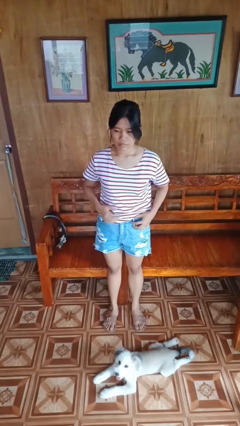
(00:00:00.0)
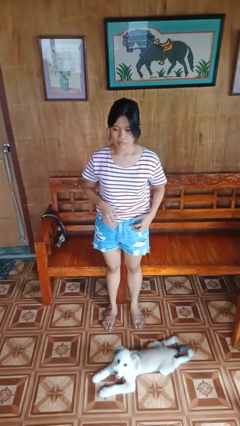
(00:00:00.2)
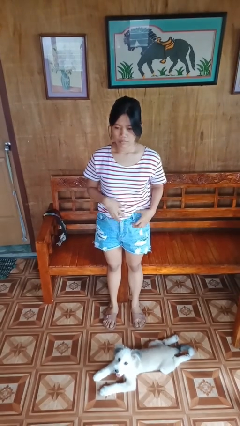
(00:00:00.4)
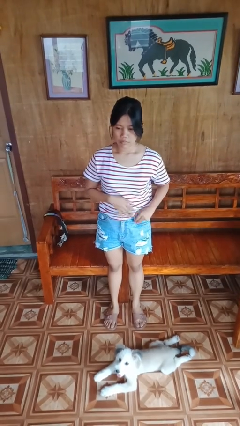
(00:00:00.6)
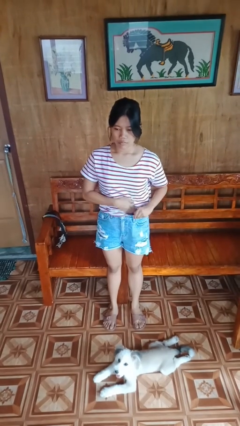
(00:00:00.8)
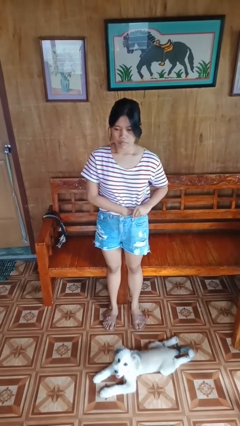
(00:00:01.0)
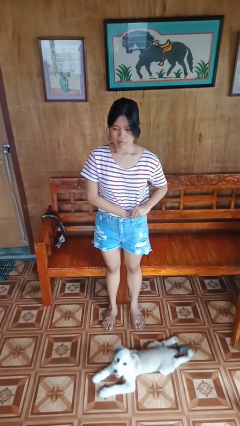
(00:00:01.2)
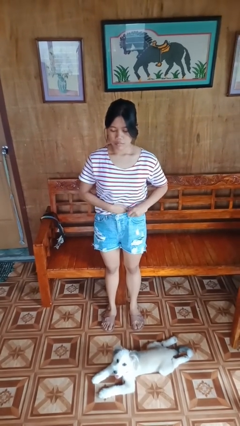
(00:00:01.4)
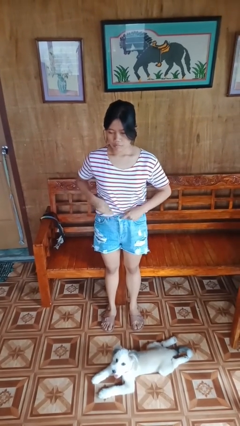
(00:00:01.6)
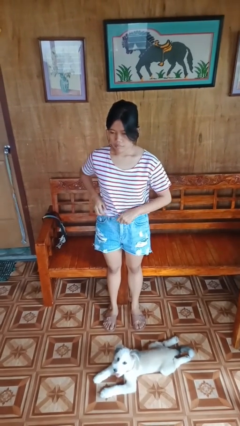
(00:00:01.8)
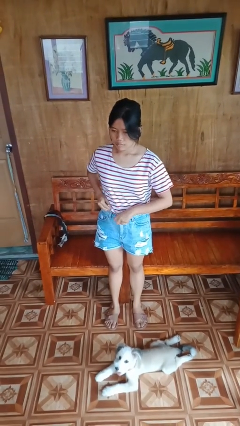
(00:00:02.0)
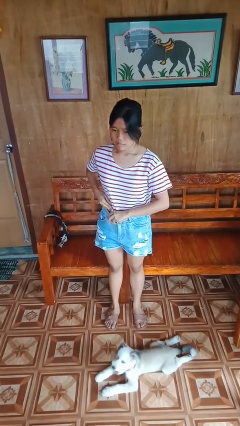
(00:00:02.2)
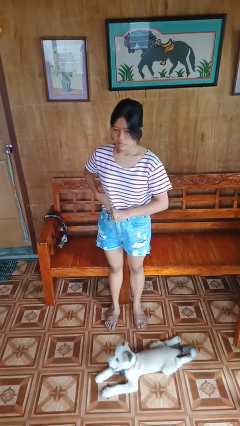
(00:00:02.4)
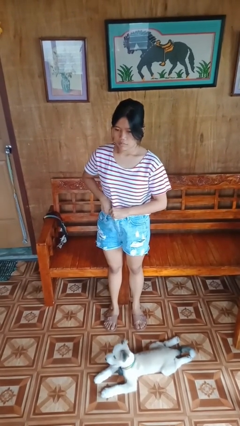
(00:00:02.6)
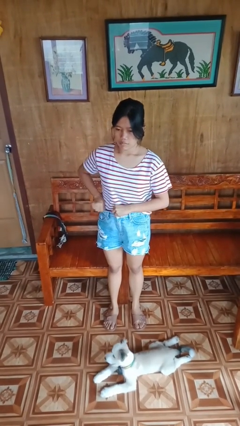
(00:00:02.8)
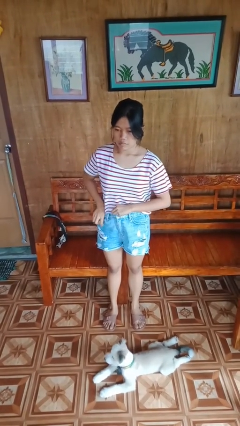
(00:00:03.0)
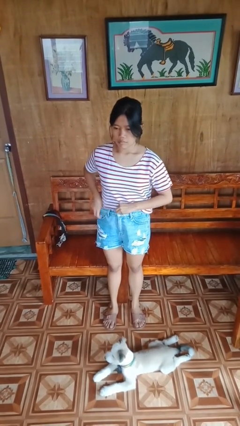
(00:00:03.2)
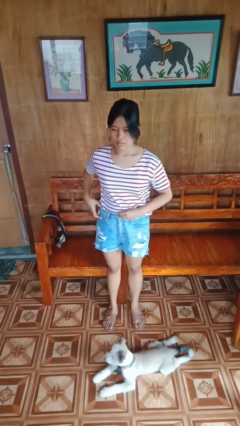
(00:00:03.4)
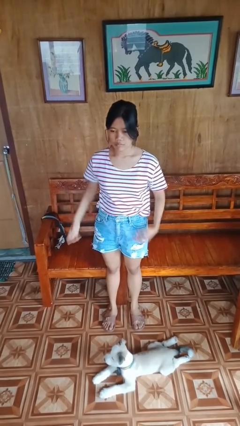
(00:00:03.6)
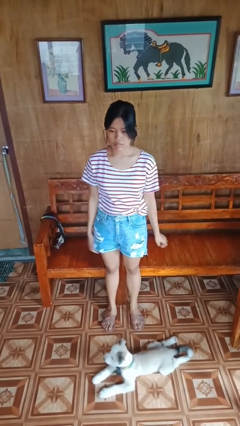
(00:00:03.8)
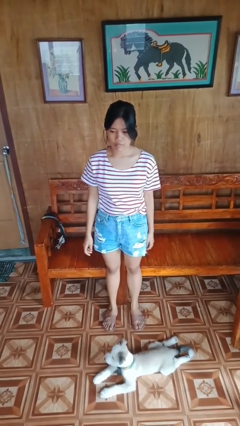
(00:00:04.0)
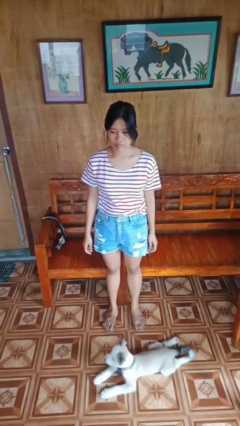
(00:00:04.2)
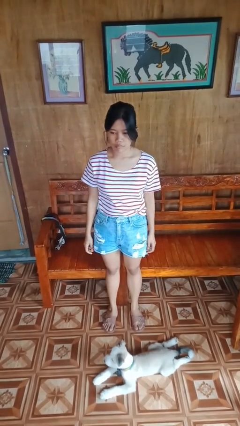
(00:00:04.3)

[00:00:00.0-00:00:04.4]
person tucks in shirt

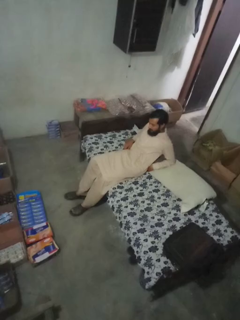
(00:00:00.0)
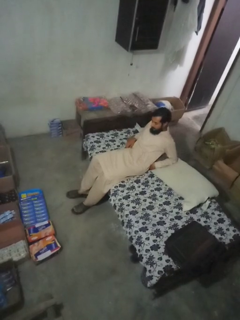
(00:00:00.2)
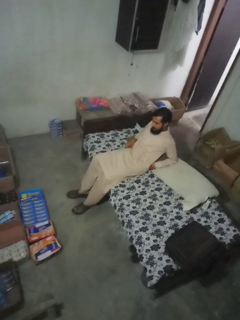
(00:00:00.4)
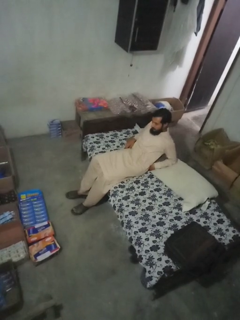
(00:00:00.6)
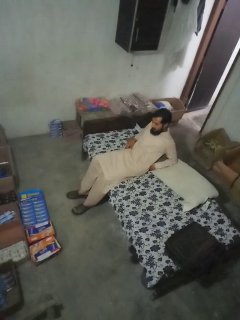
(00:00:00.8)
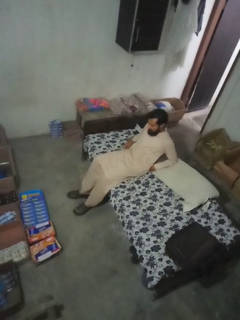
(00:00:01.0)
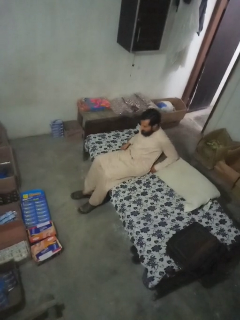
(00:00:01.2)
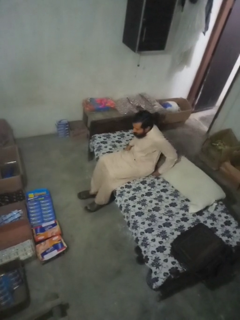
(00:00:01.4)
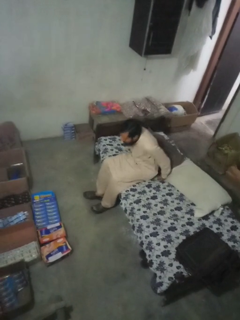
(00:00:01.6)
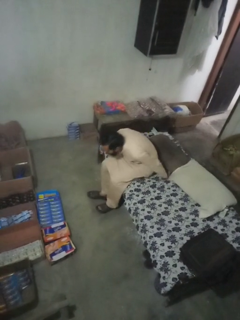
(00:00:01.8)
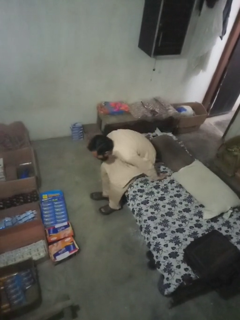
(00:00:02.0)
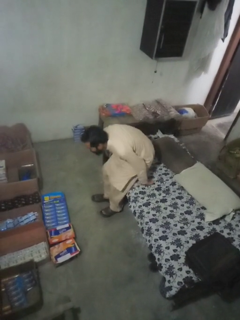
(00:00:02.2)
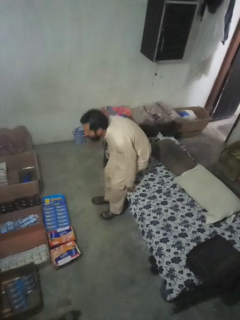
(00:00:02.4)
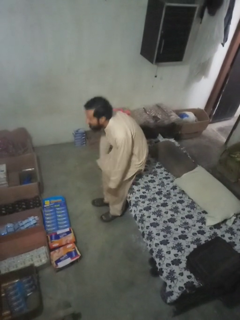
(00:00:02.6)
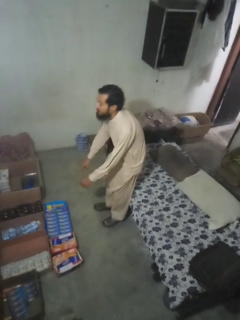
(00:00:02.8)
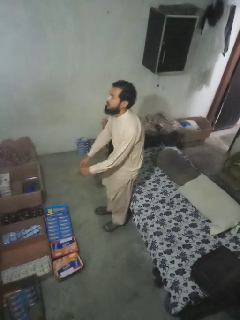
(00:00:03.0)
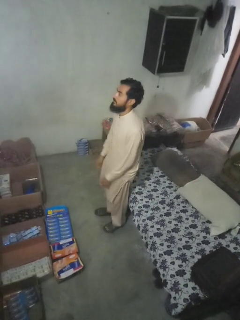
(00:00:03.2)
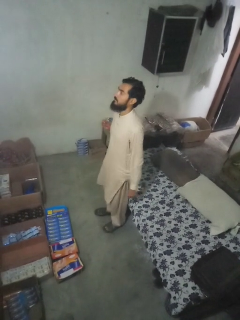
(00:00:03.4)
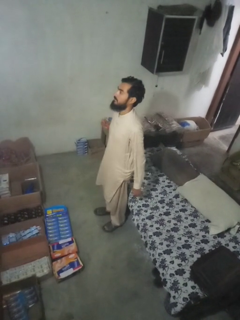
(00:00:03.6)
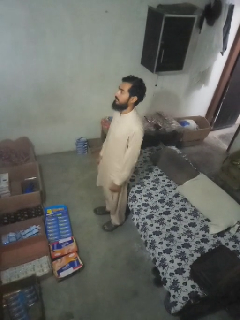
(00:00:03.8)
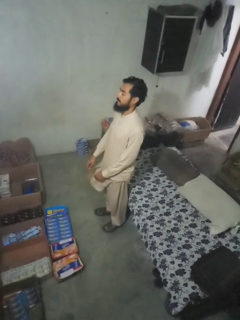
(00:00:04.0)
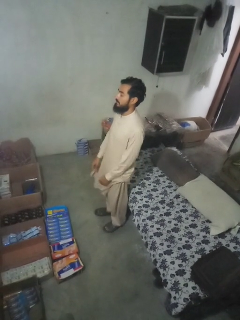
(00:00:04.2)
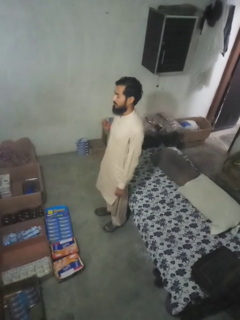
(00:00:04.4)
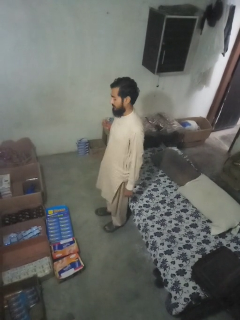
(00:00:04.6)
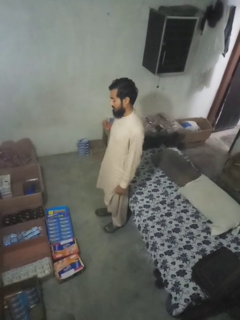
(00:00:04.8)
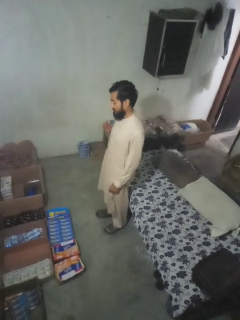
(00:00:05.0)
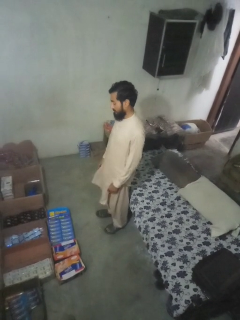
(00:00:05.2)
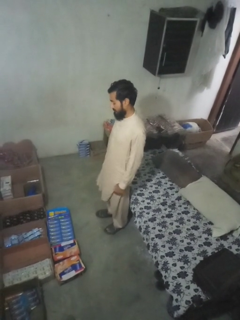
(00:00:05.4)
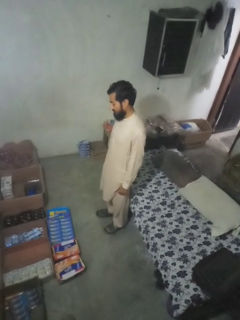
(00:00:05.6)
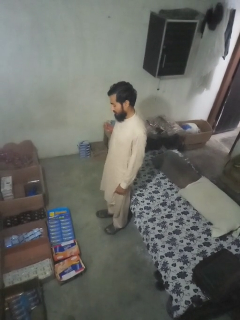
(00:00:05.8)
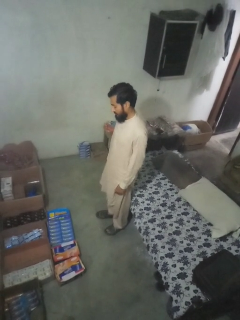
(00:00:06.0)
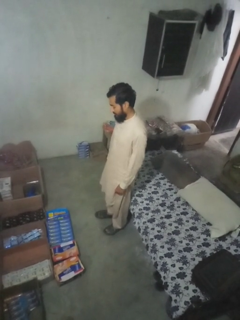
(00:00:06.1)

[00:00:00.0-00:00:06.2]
person stands up

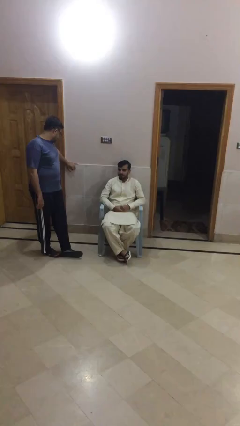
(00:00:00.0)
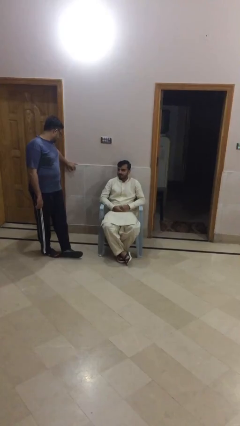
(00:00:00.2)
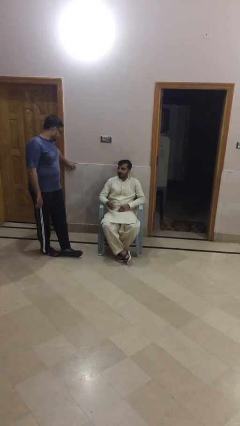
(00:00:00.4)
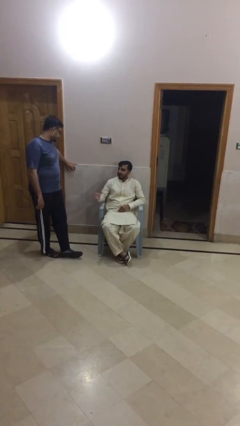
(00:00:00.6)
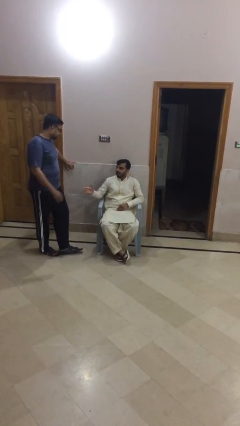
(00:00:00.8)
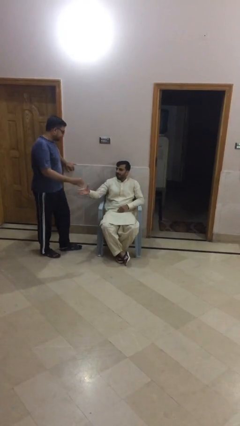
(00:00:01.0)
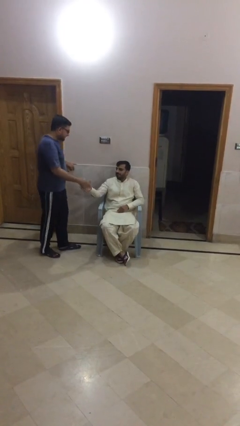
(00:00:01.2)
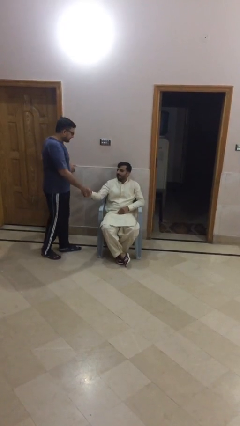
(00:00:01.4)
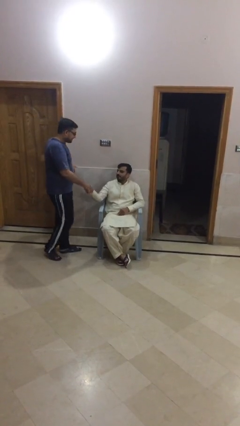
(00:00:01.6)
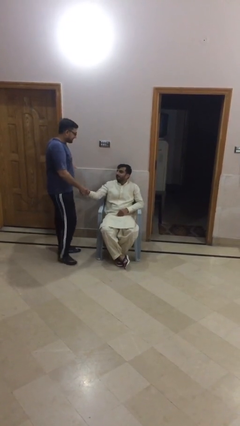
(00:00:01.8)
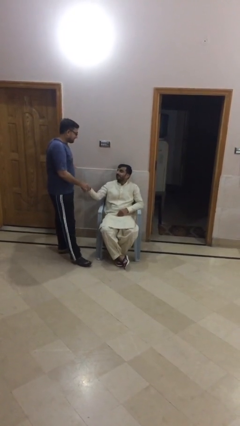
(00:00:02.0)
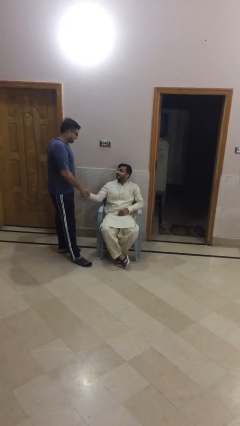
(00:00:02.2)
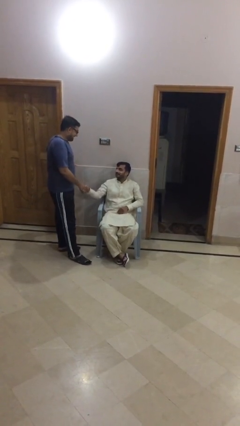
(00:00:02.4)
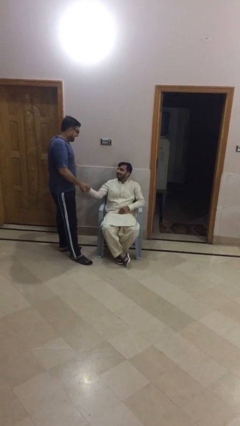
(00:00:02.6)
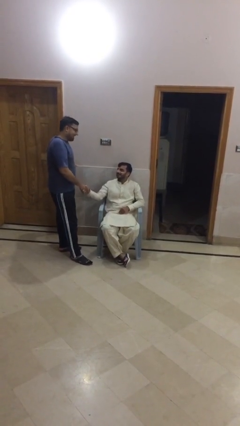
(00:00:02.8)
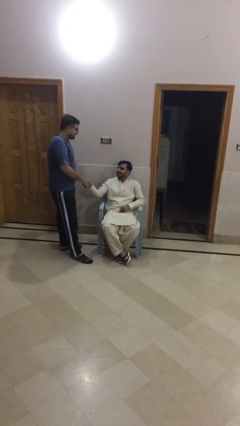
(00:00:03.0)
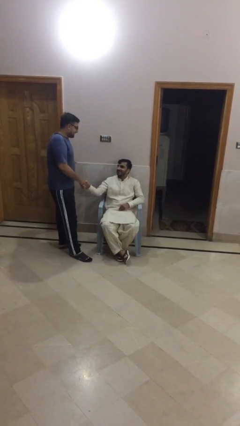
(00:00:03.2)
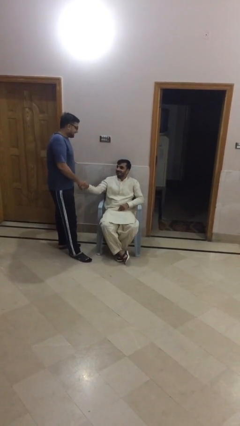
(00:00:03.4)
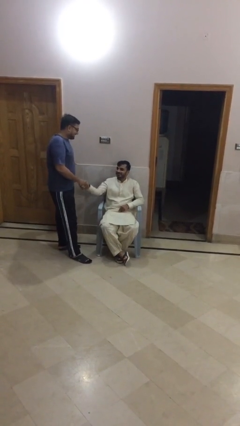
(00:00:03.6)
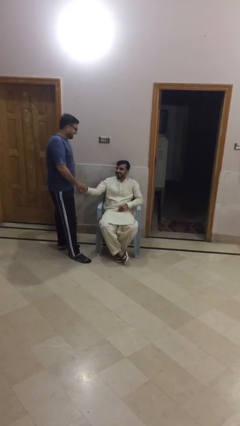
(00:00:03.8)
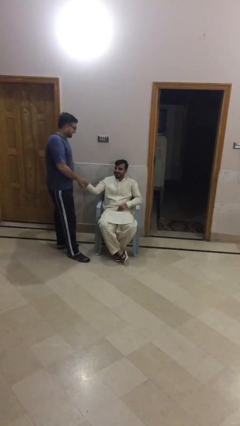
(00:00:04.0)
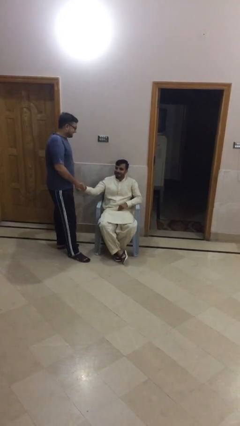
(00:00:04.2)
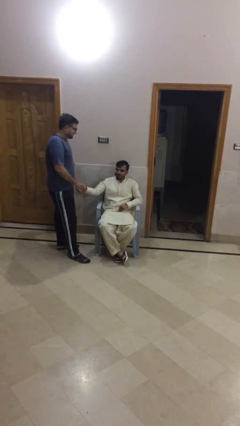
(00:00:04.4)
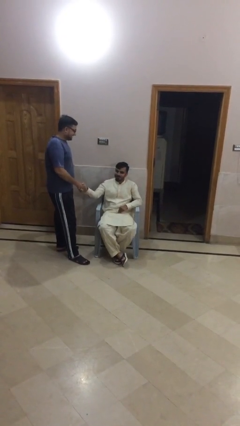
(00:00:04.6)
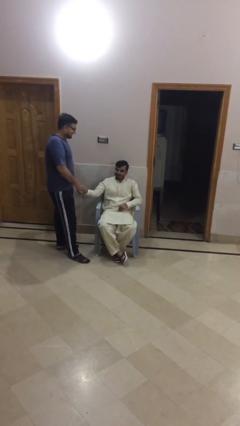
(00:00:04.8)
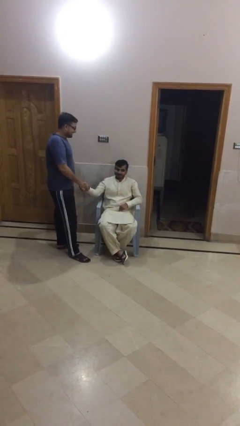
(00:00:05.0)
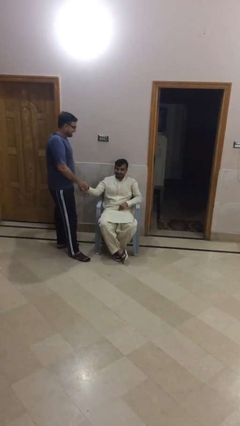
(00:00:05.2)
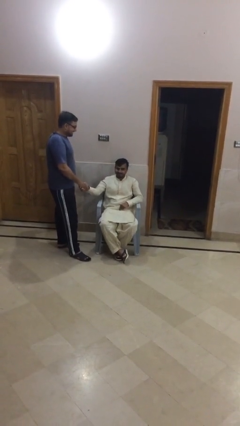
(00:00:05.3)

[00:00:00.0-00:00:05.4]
person shakes hand

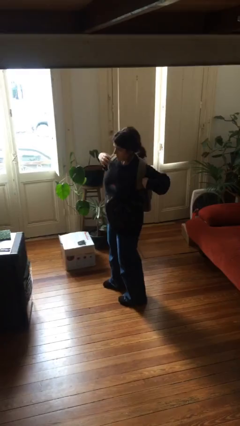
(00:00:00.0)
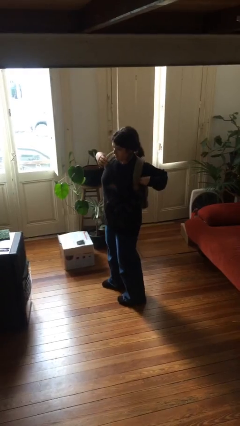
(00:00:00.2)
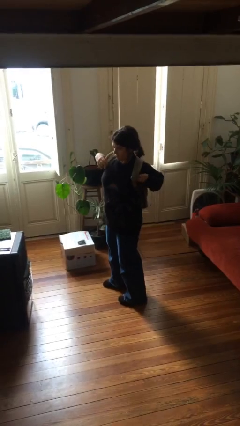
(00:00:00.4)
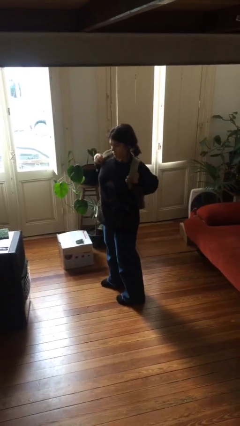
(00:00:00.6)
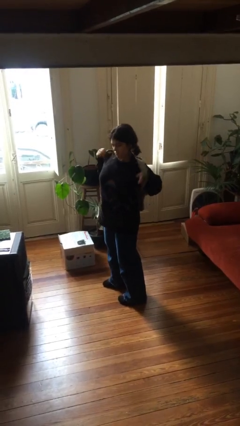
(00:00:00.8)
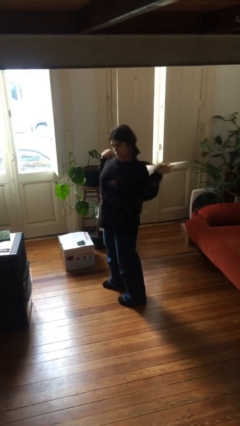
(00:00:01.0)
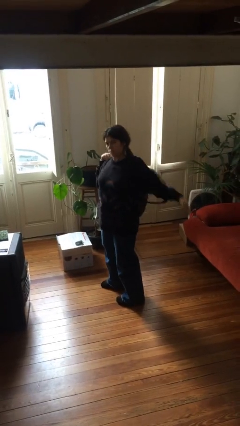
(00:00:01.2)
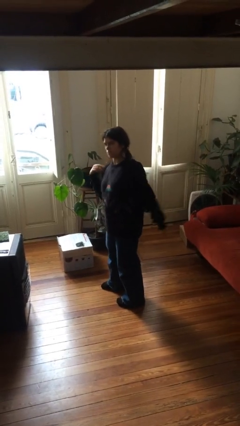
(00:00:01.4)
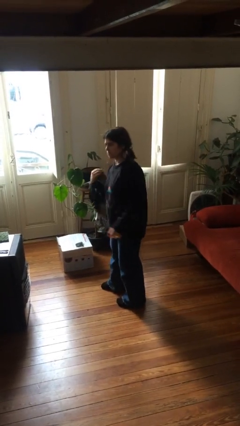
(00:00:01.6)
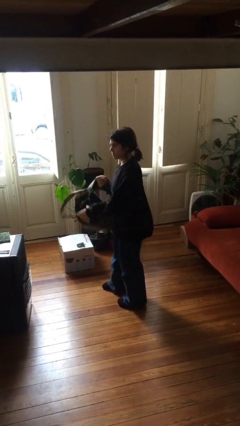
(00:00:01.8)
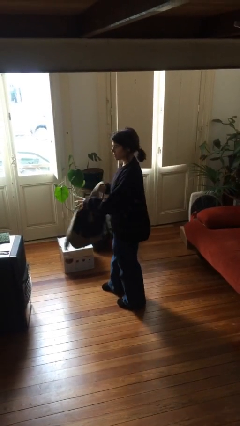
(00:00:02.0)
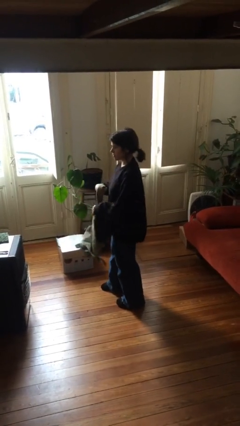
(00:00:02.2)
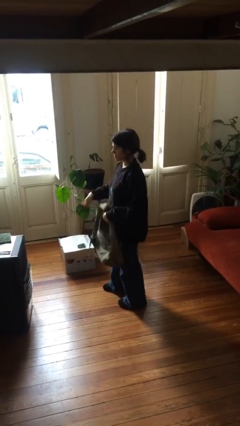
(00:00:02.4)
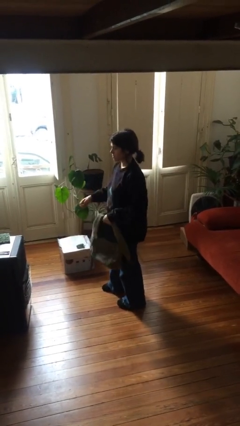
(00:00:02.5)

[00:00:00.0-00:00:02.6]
person takes off backpack

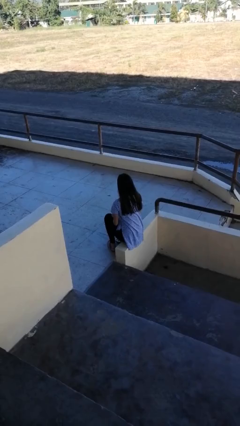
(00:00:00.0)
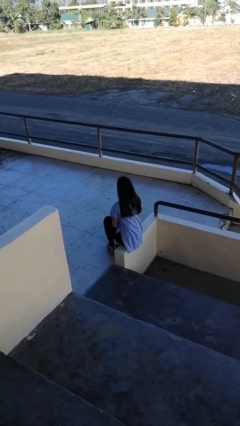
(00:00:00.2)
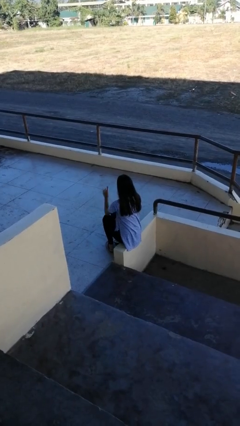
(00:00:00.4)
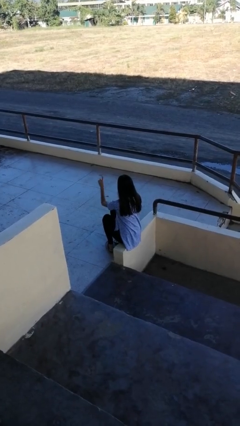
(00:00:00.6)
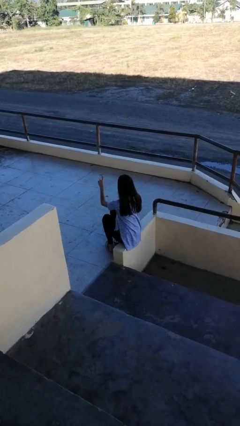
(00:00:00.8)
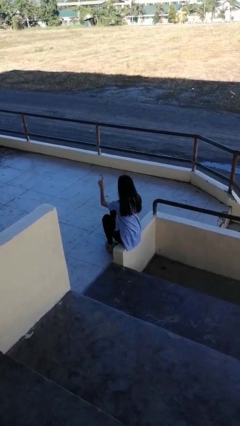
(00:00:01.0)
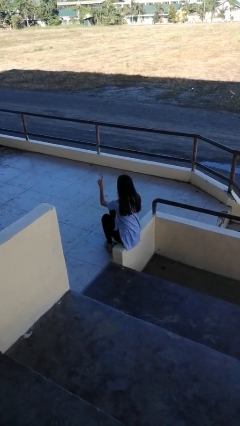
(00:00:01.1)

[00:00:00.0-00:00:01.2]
person gestures number one
